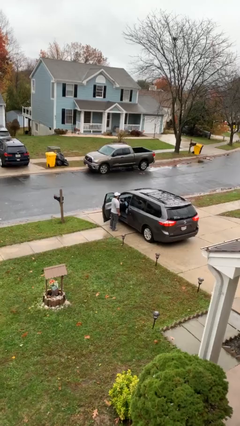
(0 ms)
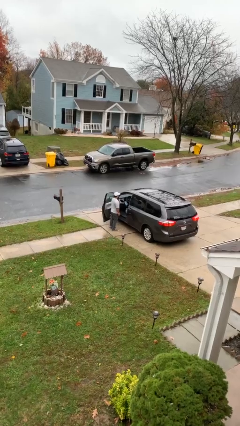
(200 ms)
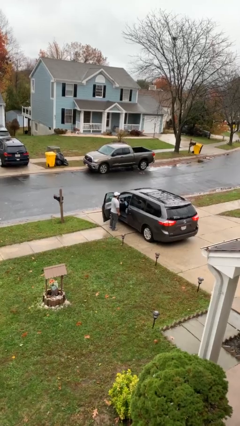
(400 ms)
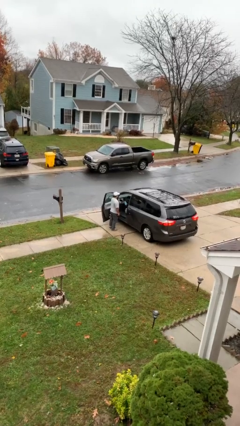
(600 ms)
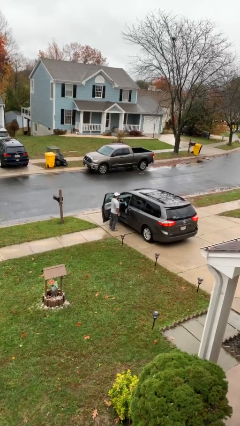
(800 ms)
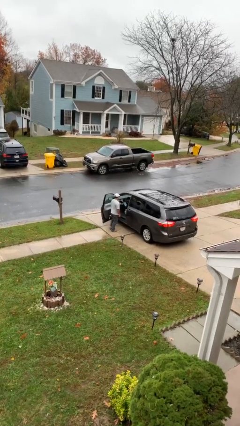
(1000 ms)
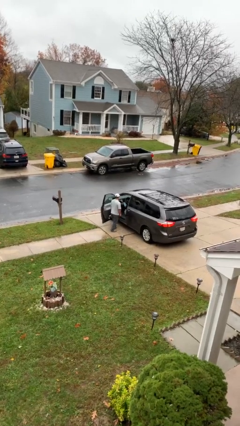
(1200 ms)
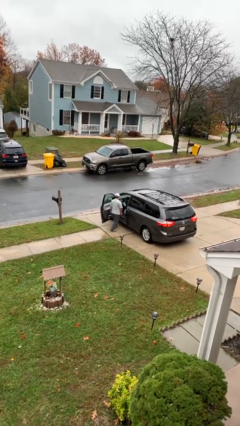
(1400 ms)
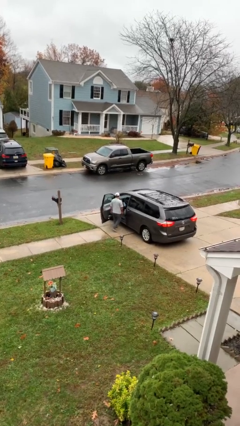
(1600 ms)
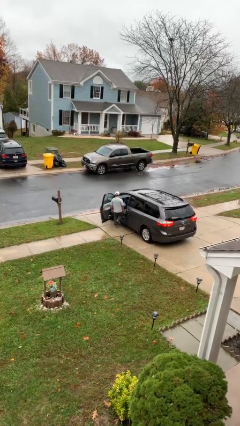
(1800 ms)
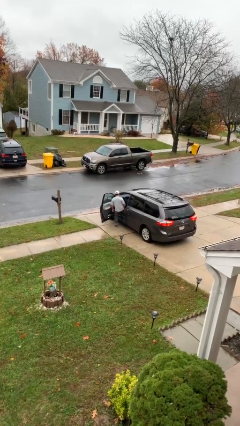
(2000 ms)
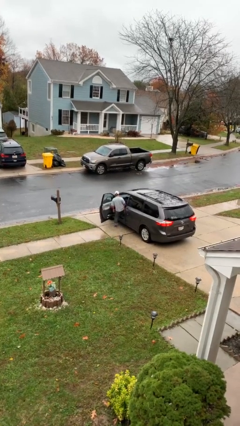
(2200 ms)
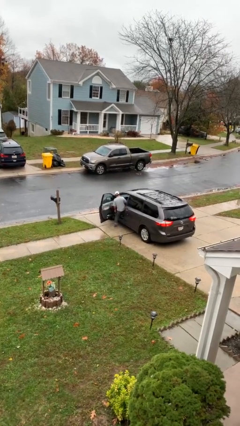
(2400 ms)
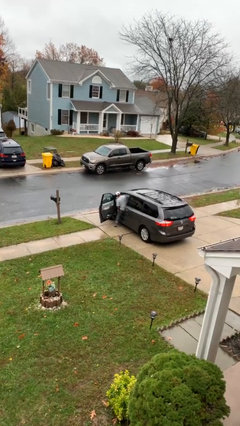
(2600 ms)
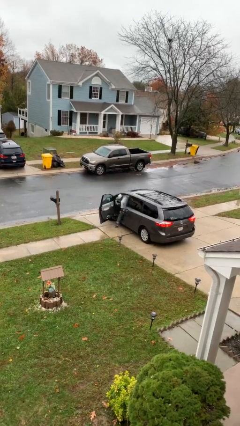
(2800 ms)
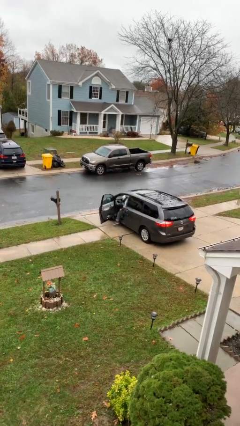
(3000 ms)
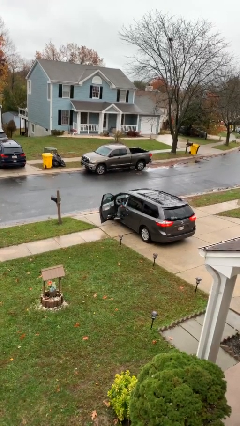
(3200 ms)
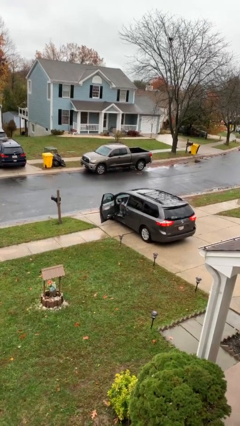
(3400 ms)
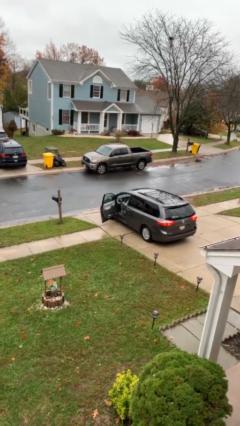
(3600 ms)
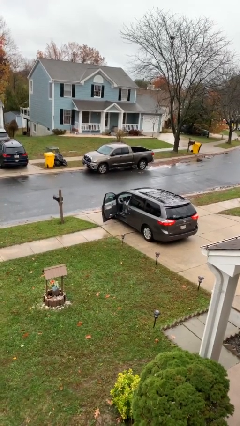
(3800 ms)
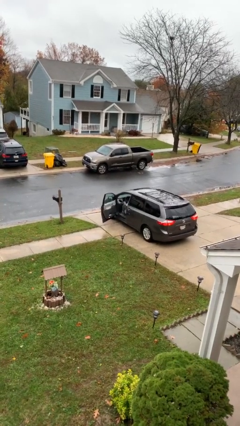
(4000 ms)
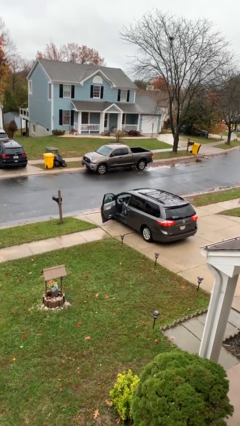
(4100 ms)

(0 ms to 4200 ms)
person enters car

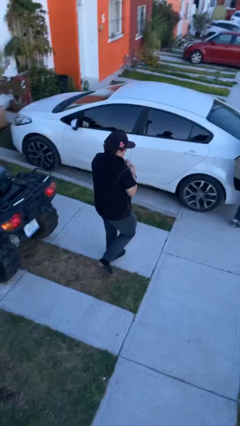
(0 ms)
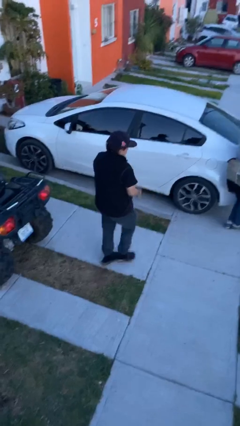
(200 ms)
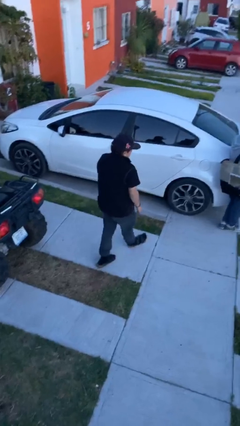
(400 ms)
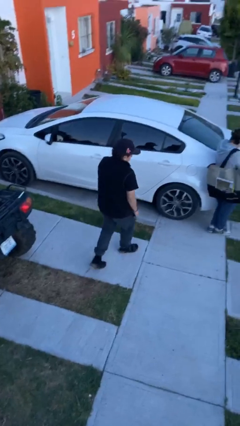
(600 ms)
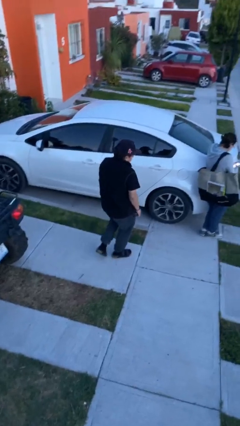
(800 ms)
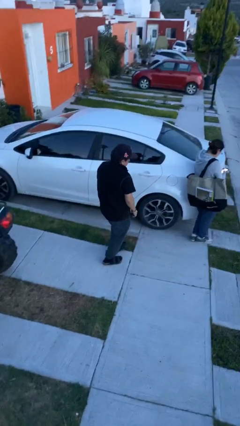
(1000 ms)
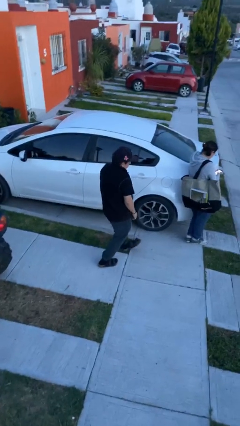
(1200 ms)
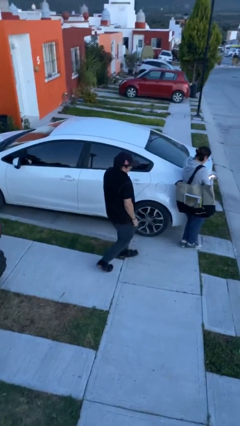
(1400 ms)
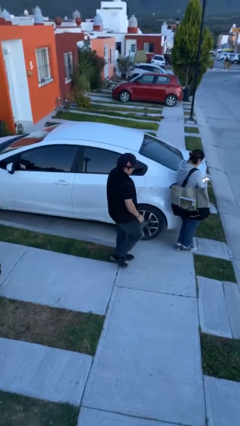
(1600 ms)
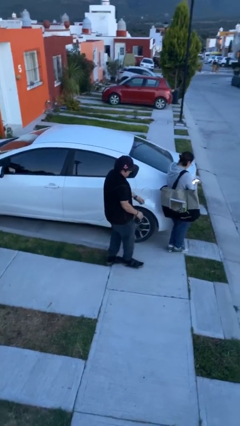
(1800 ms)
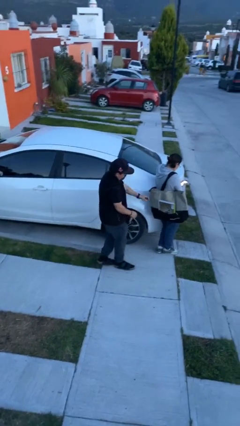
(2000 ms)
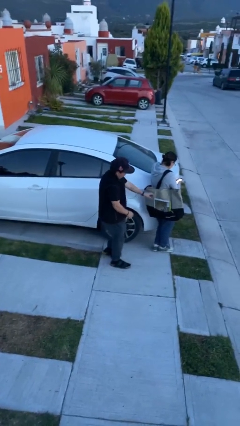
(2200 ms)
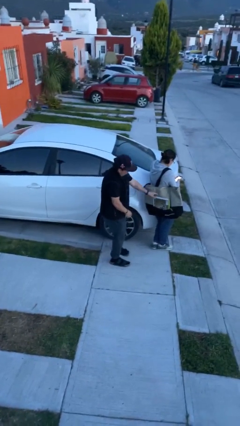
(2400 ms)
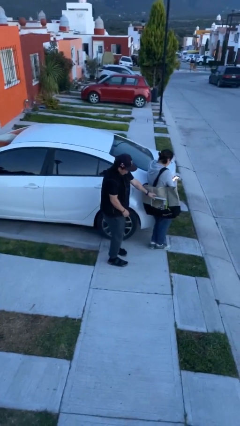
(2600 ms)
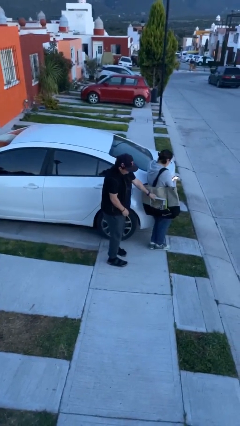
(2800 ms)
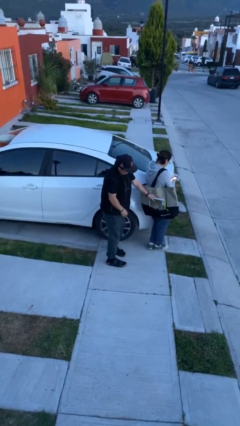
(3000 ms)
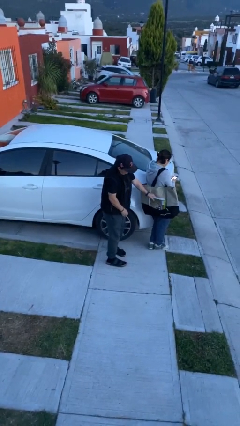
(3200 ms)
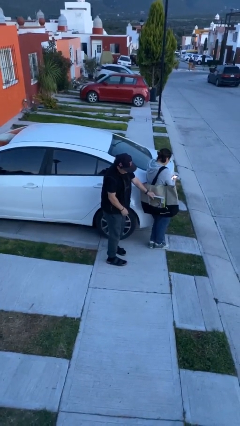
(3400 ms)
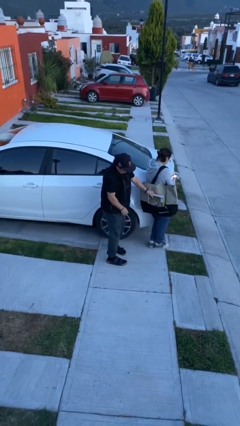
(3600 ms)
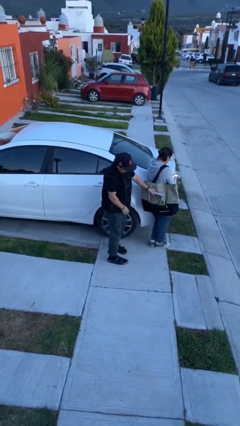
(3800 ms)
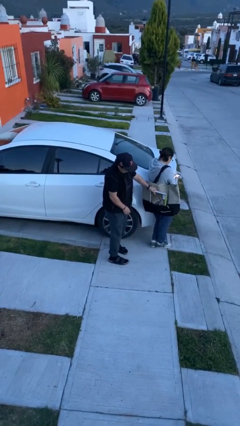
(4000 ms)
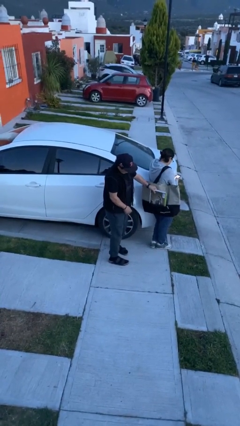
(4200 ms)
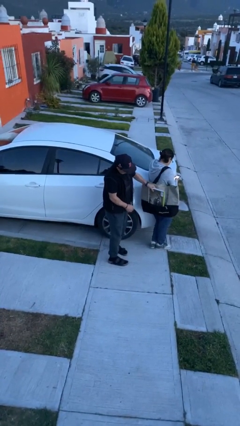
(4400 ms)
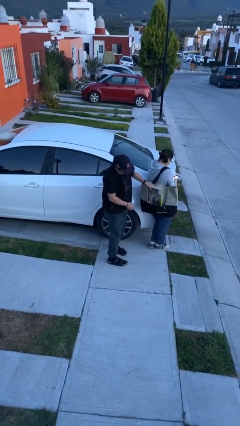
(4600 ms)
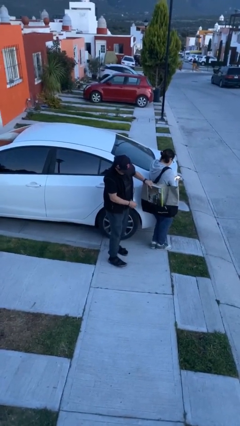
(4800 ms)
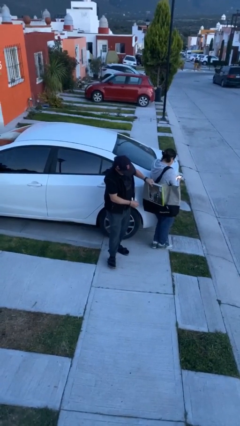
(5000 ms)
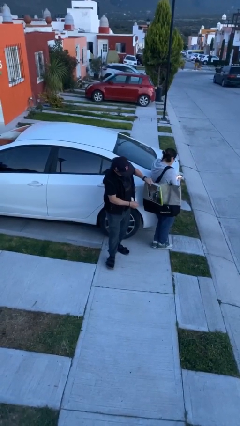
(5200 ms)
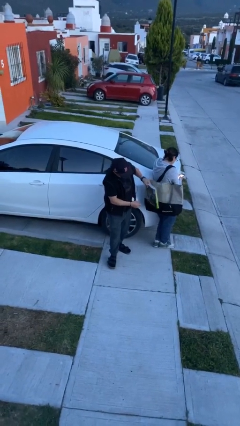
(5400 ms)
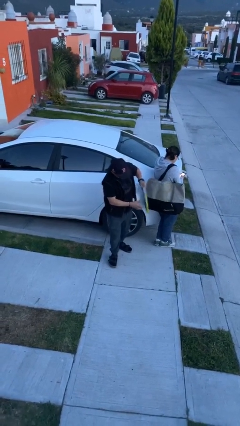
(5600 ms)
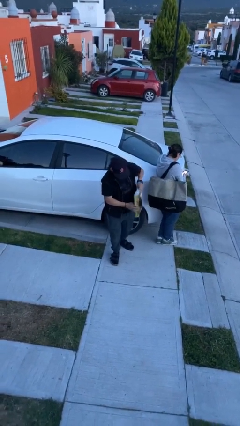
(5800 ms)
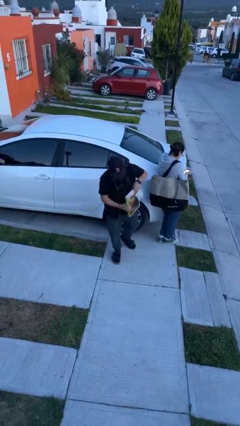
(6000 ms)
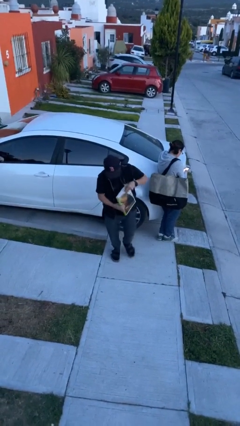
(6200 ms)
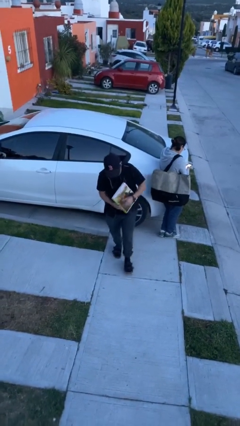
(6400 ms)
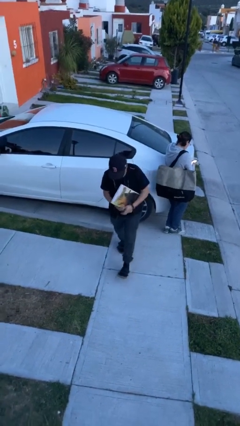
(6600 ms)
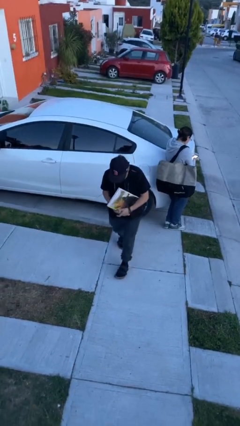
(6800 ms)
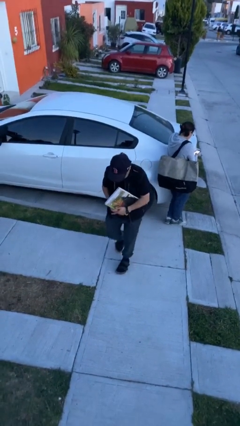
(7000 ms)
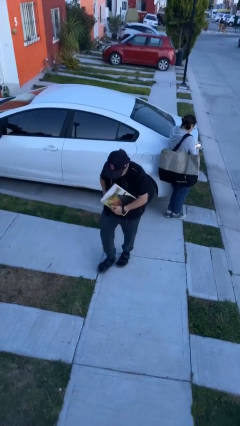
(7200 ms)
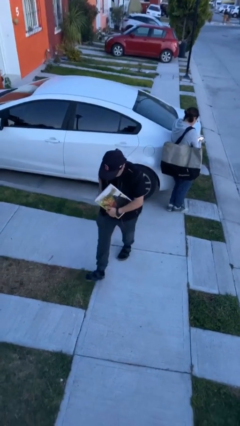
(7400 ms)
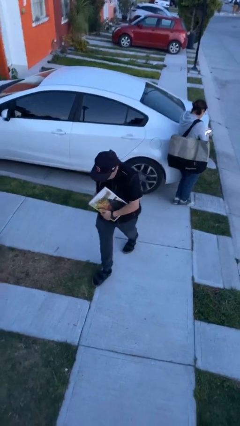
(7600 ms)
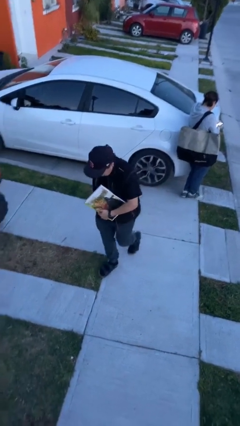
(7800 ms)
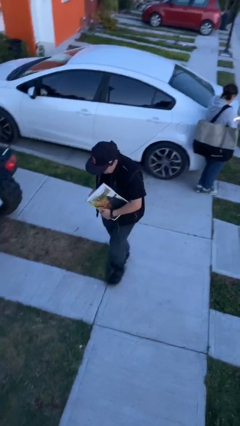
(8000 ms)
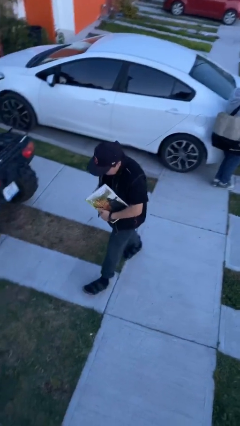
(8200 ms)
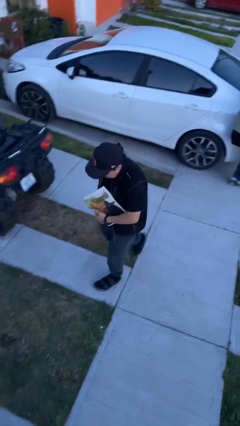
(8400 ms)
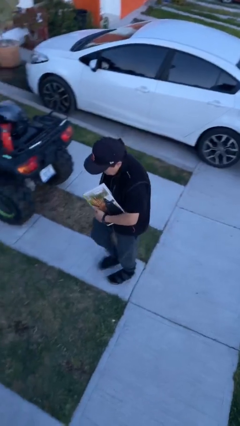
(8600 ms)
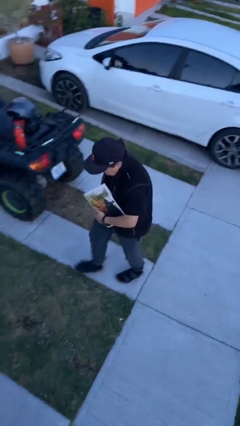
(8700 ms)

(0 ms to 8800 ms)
person steals object from person

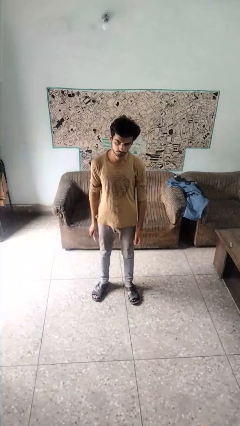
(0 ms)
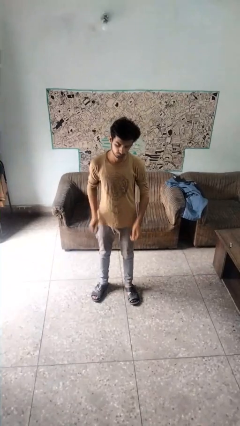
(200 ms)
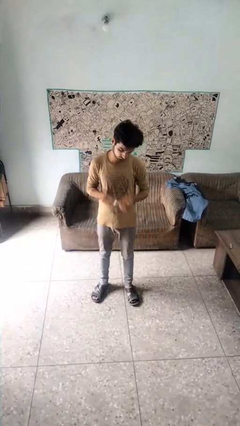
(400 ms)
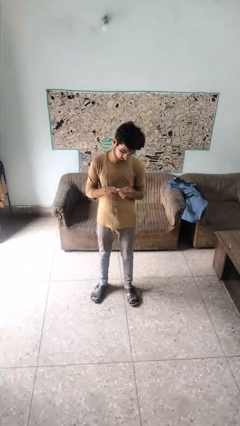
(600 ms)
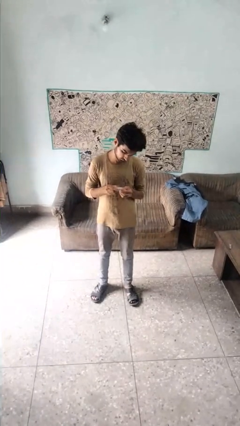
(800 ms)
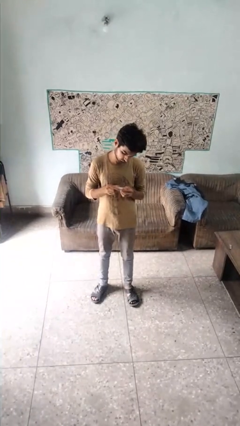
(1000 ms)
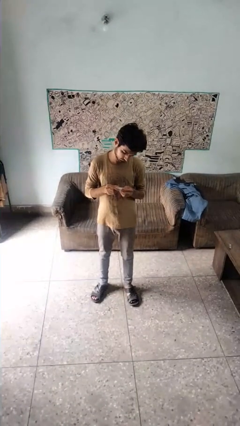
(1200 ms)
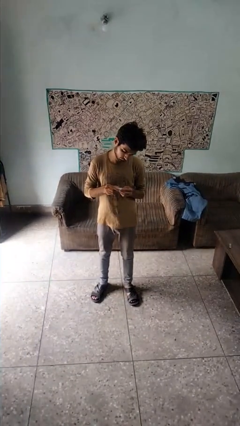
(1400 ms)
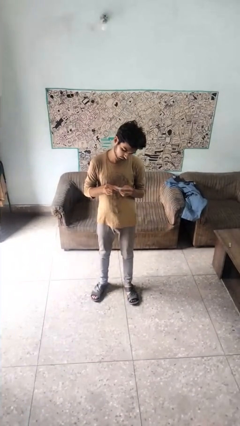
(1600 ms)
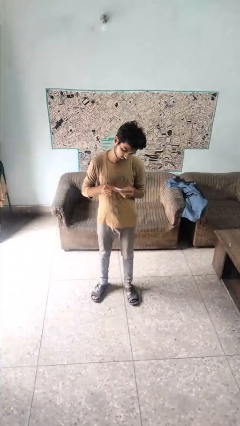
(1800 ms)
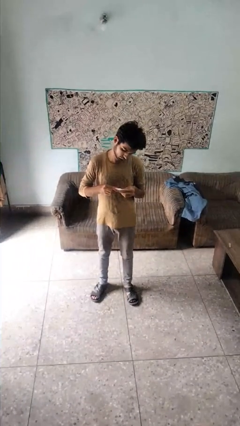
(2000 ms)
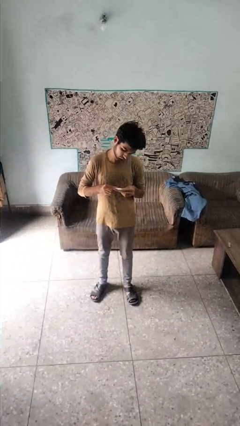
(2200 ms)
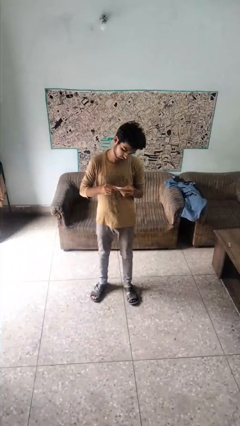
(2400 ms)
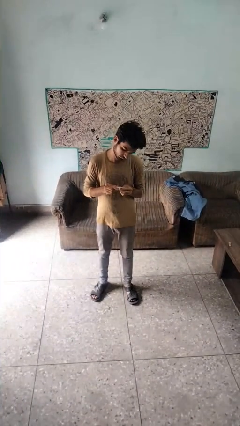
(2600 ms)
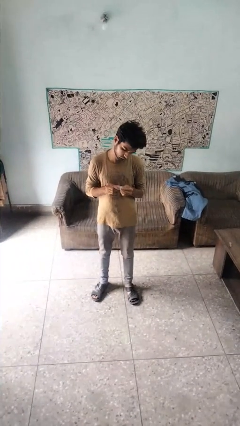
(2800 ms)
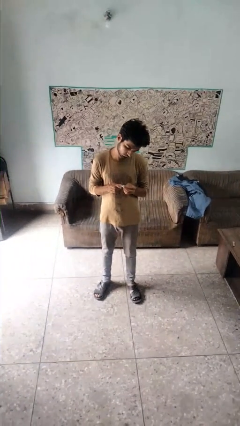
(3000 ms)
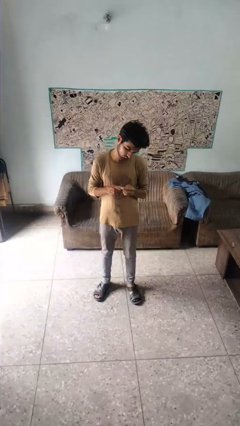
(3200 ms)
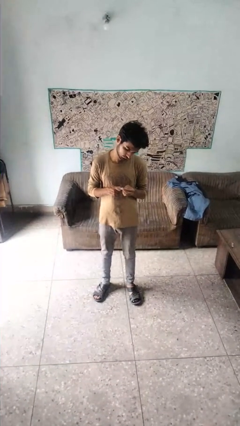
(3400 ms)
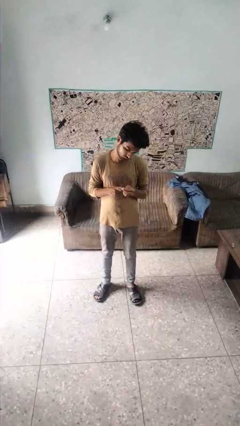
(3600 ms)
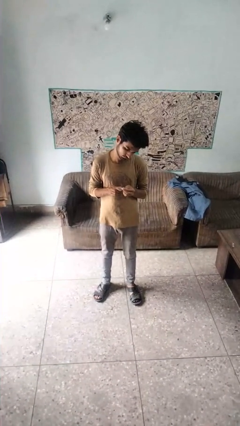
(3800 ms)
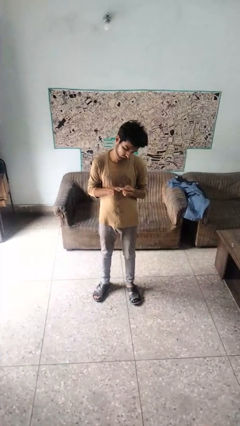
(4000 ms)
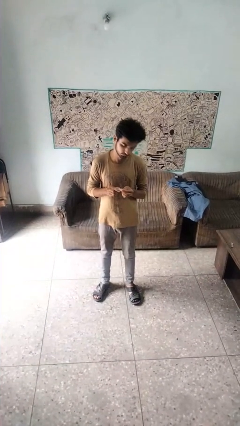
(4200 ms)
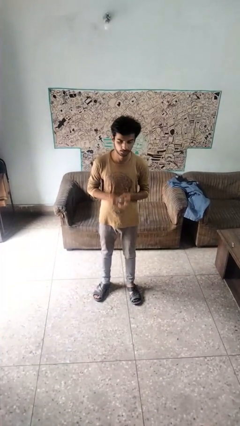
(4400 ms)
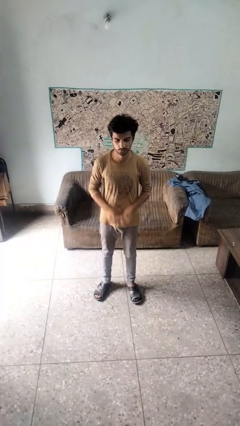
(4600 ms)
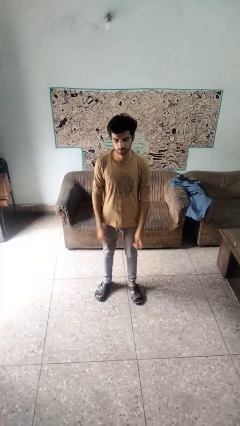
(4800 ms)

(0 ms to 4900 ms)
person files fingernails
